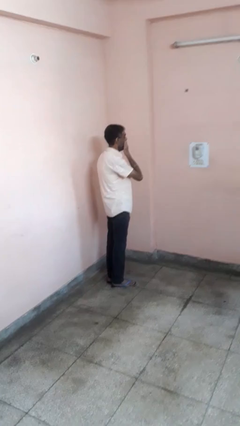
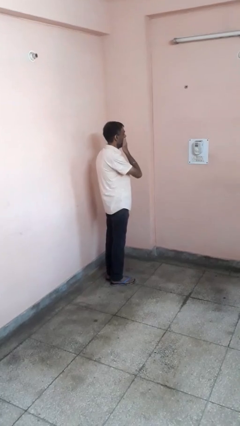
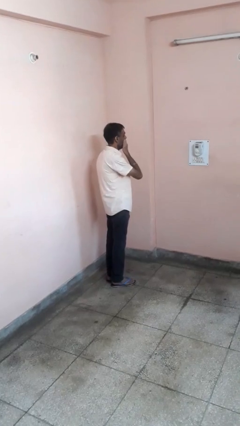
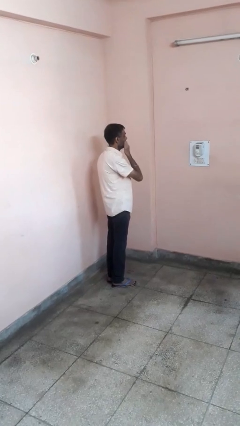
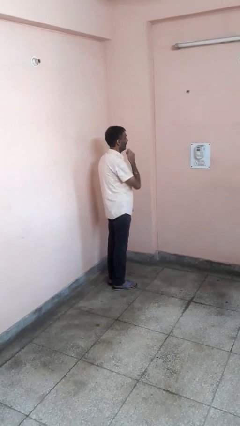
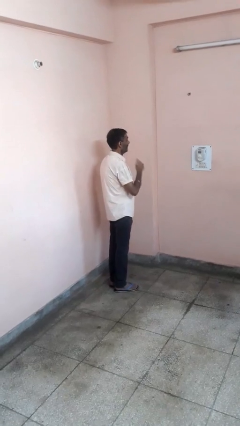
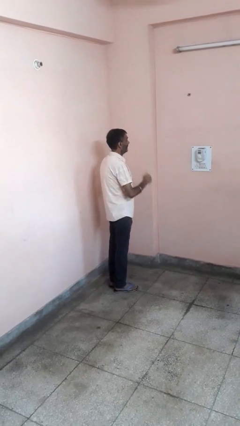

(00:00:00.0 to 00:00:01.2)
person yawns

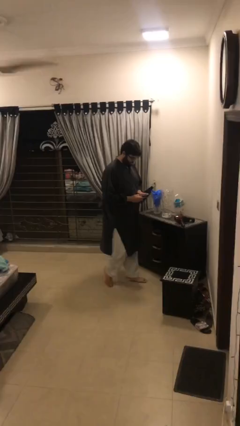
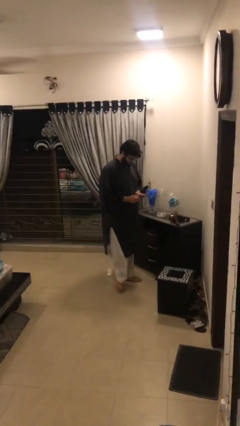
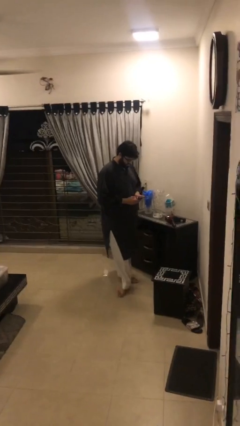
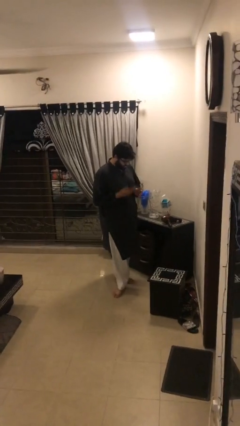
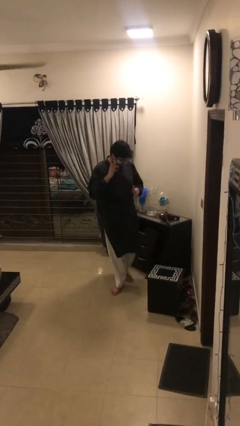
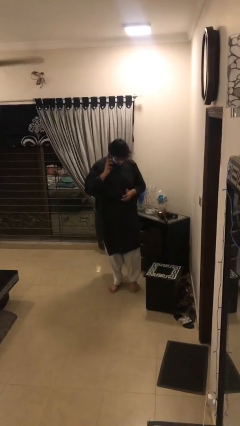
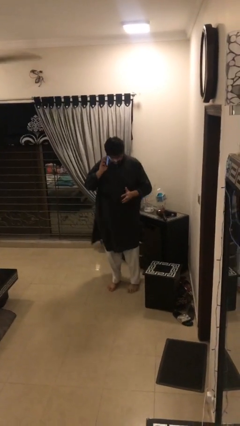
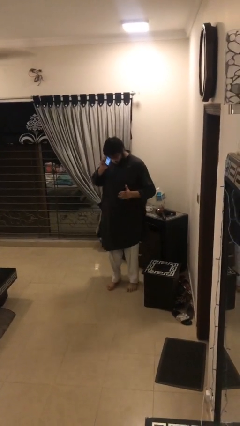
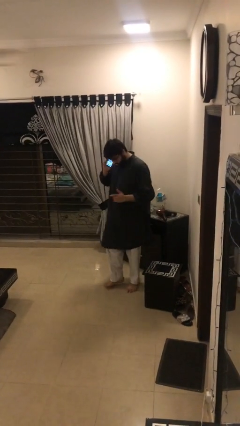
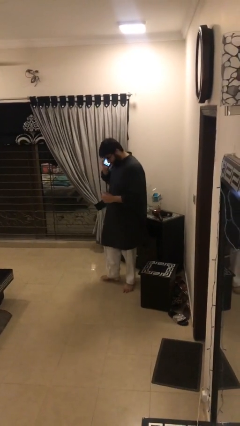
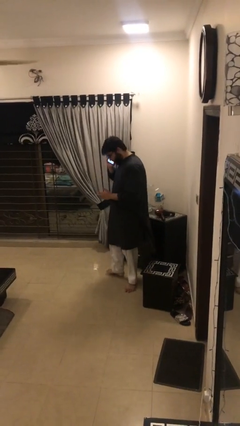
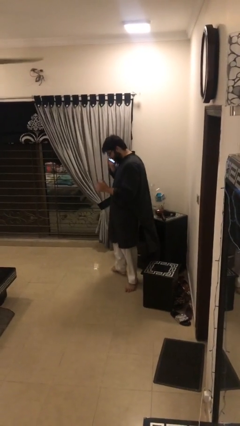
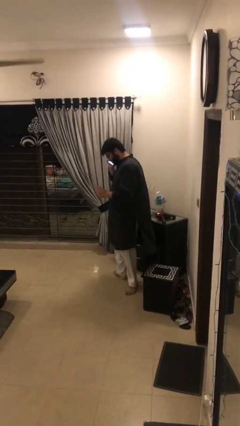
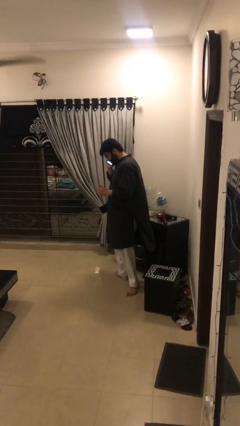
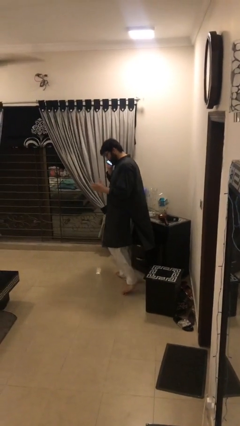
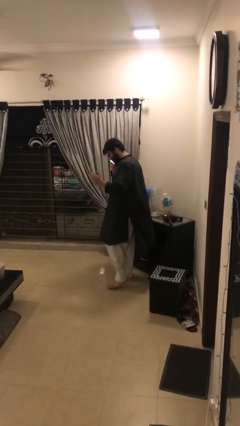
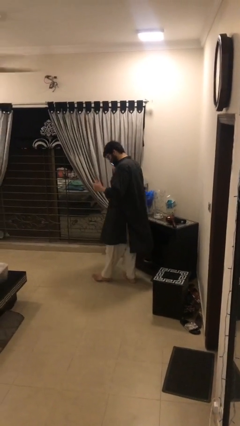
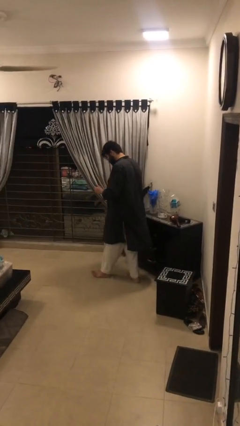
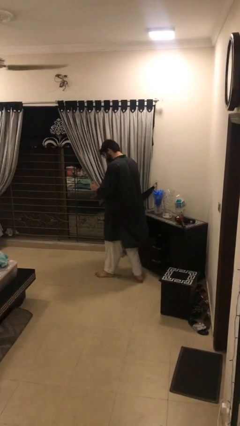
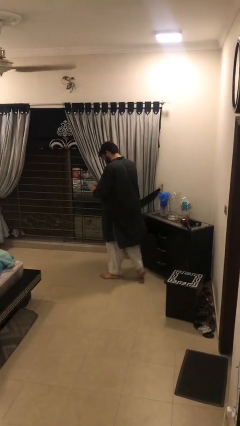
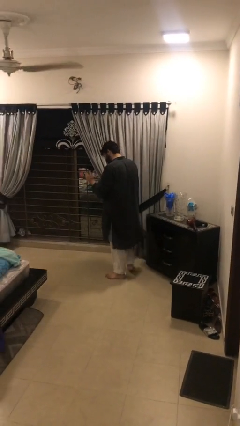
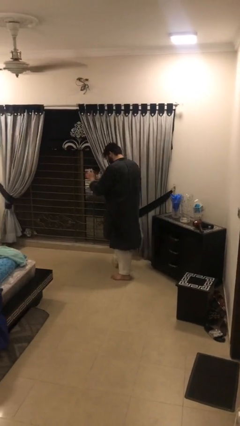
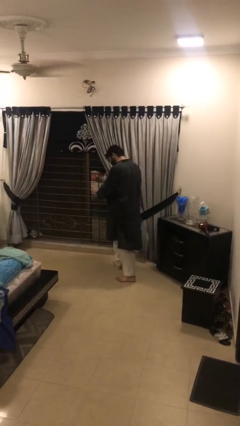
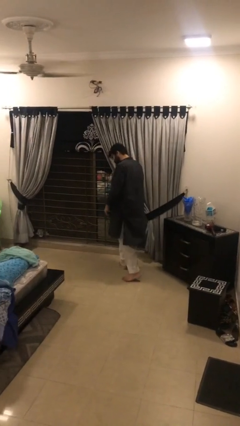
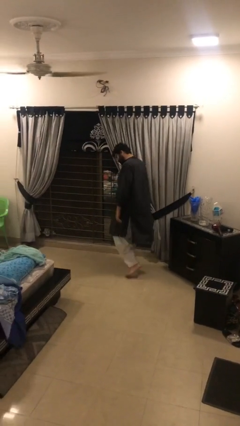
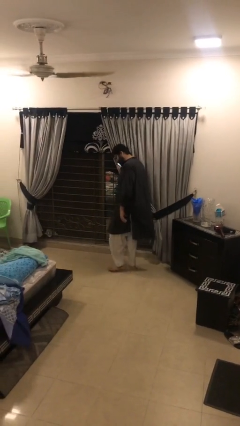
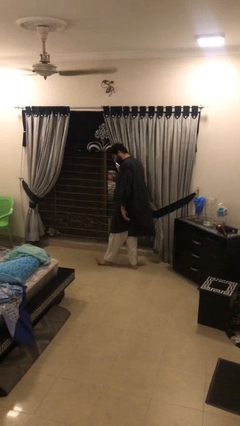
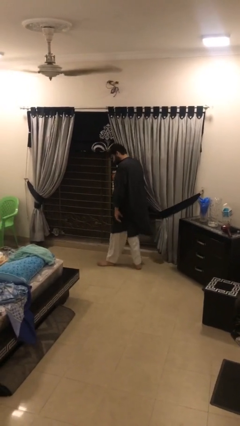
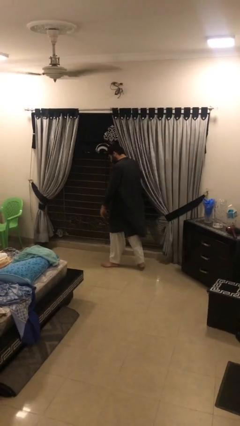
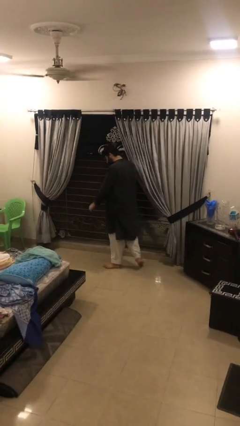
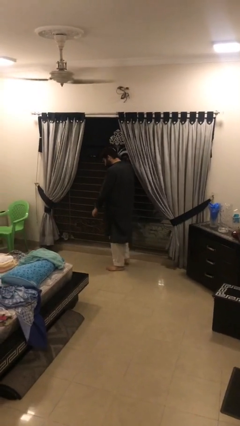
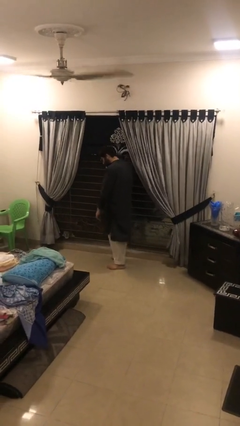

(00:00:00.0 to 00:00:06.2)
person talks on phone

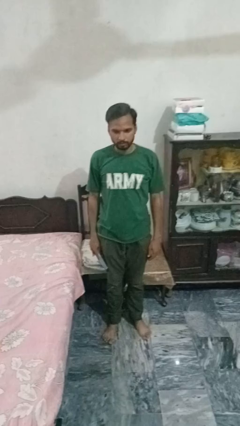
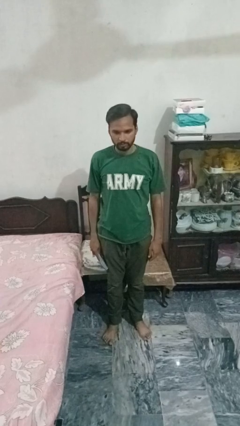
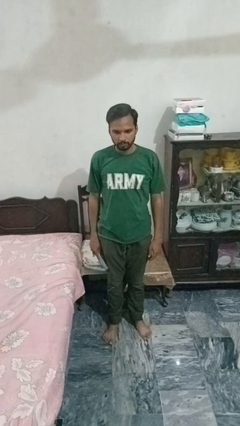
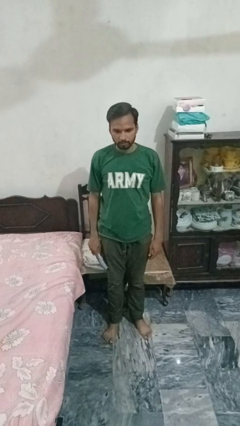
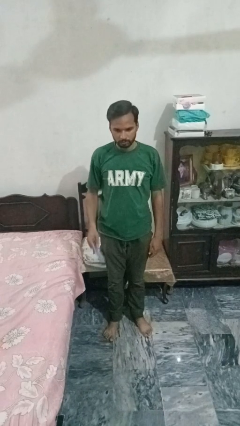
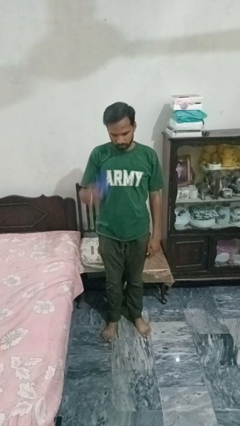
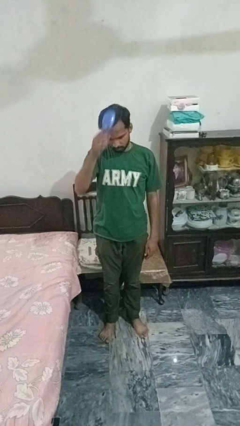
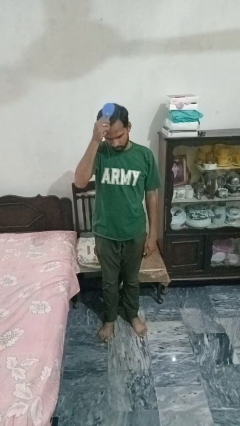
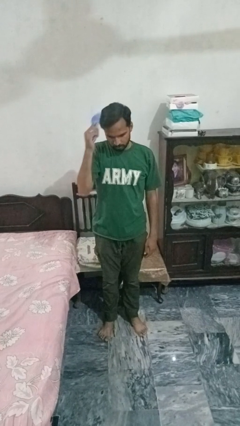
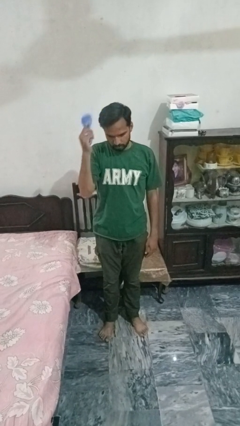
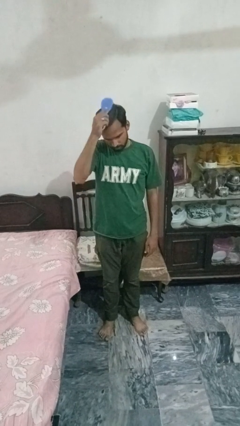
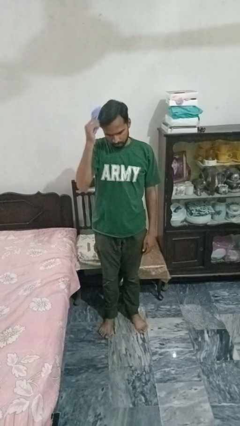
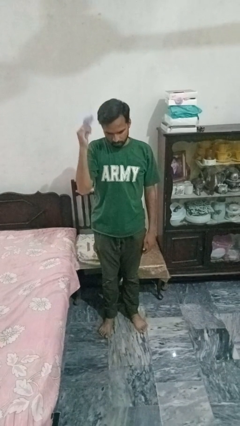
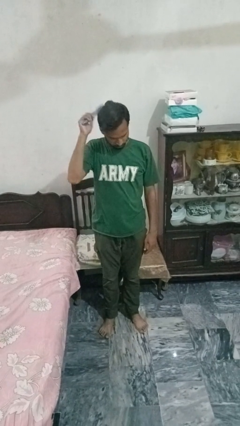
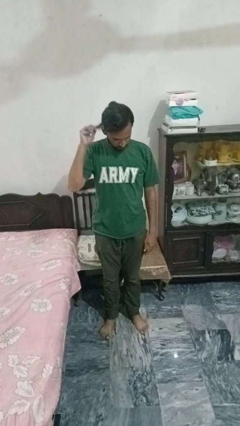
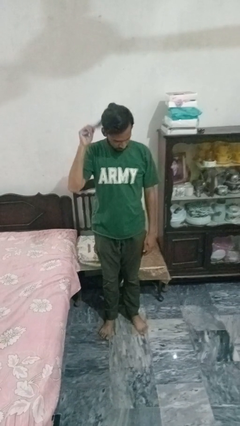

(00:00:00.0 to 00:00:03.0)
person brushes hair

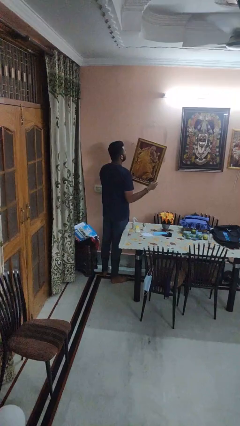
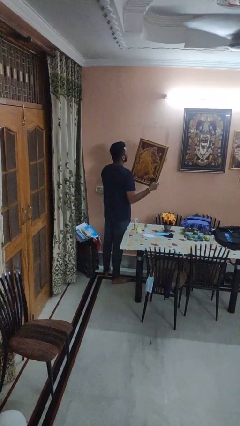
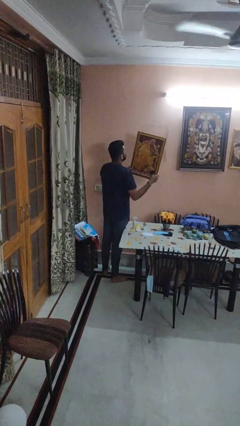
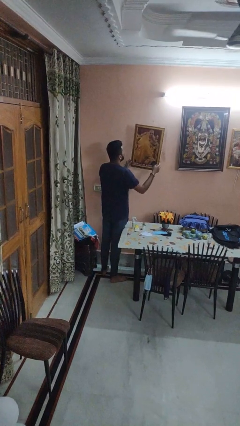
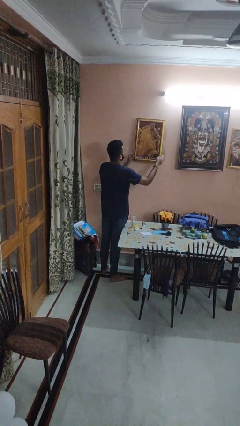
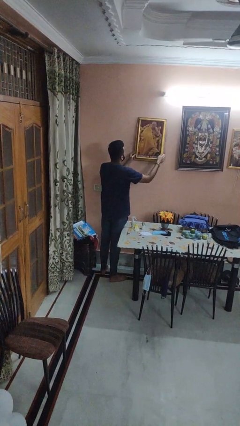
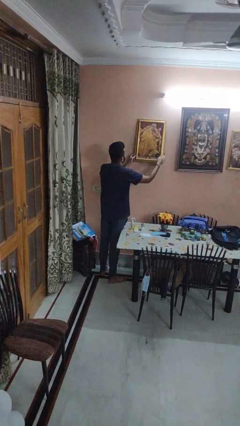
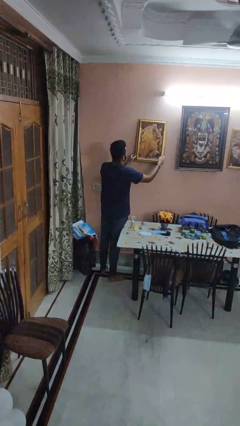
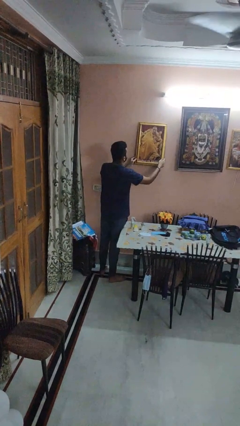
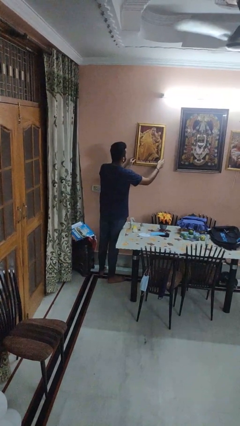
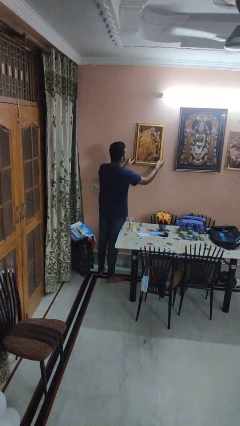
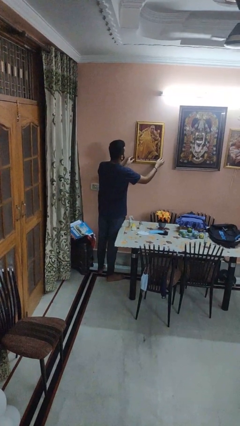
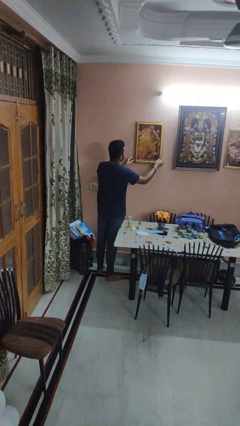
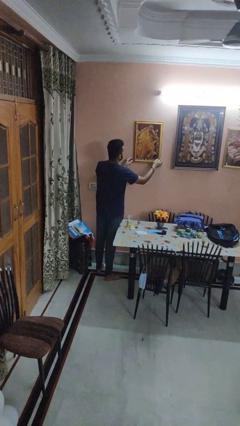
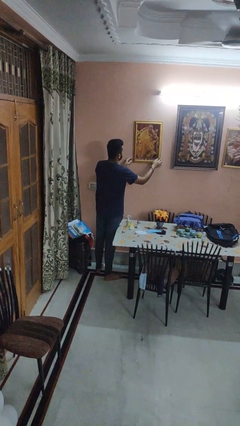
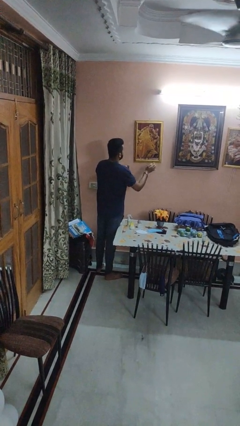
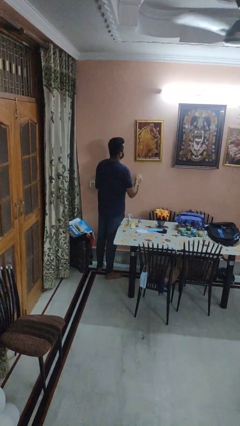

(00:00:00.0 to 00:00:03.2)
person puts up picture frame

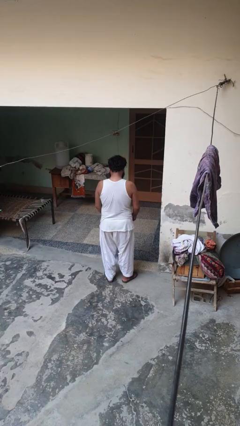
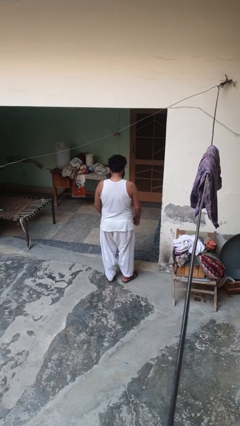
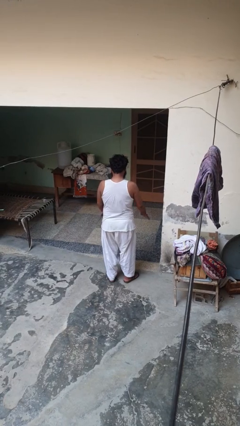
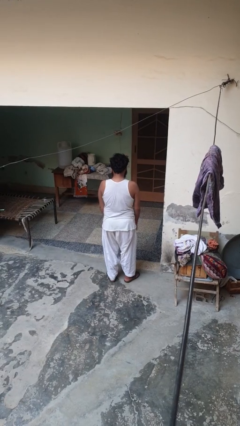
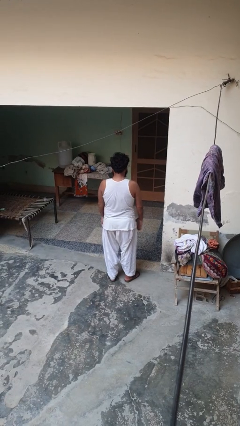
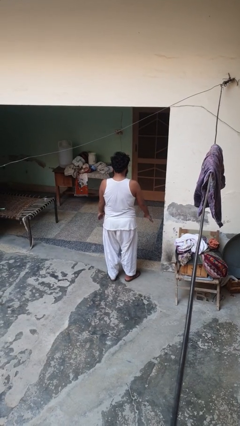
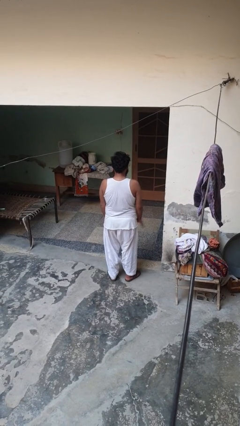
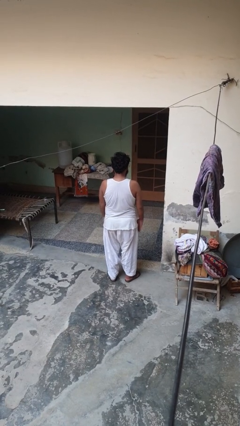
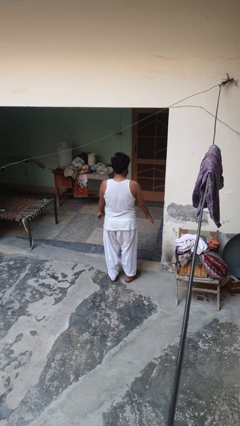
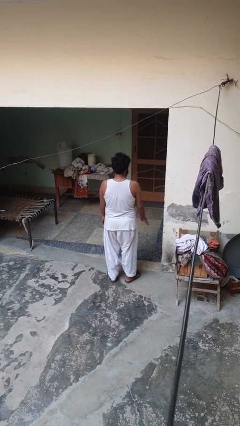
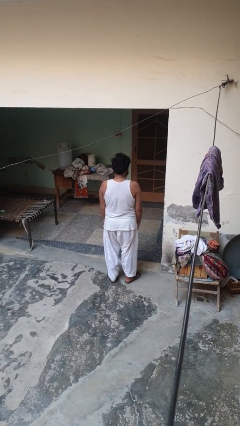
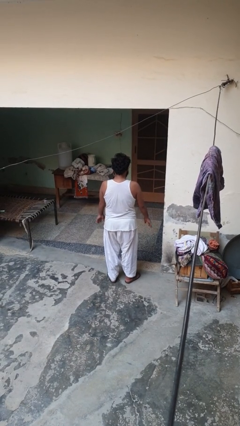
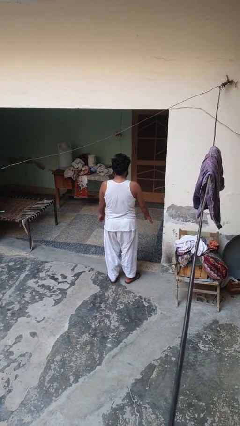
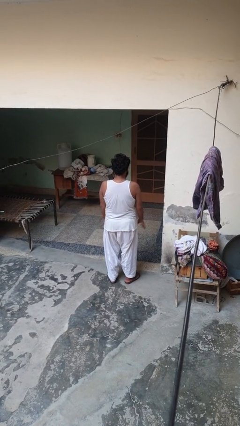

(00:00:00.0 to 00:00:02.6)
person slaps hands on thighs

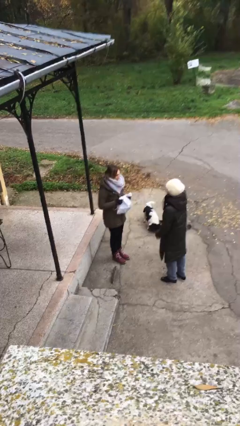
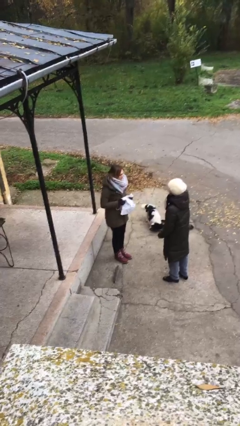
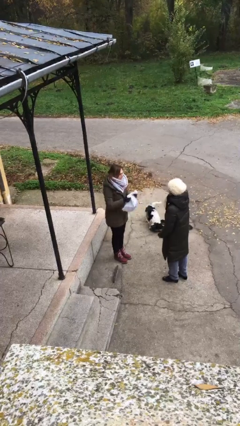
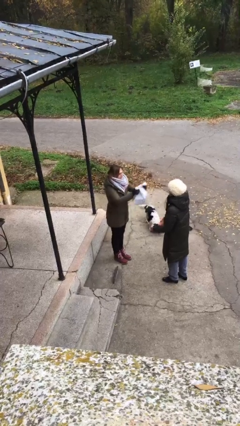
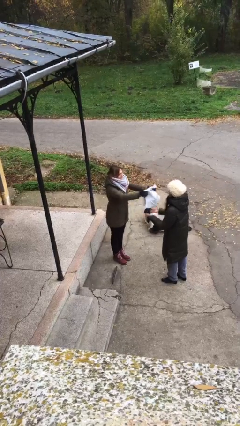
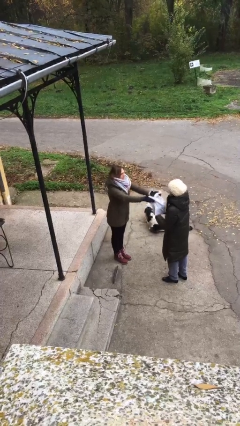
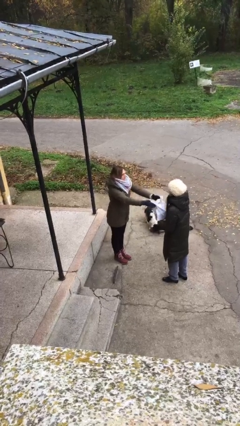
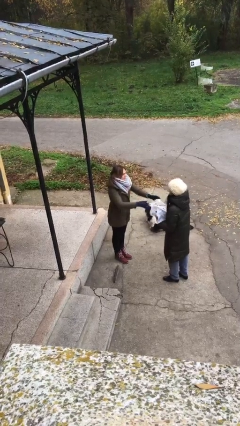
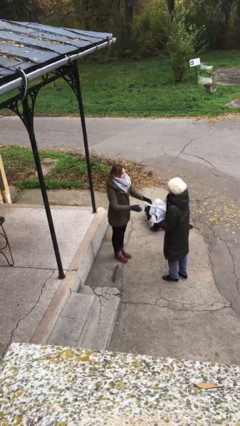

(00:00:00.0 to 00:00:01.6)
person transfers object to person
